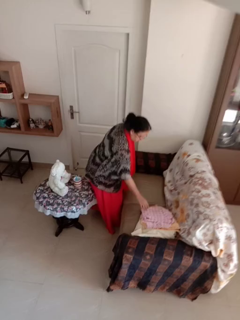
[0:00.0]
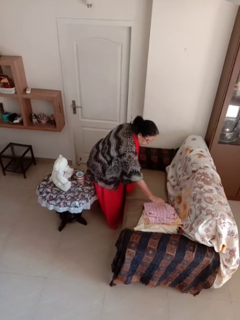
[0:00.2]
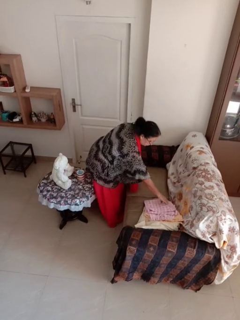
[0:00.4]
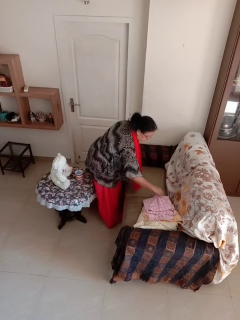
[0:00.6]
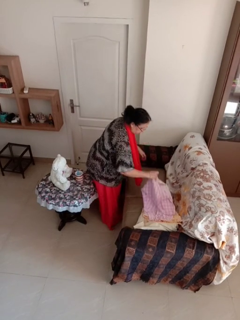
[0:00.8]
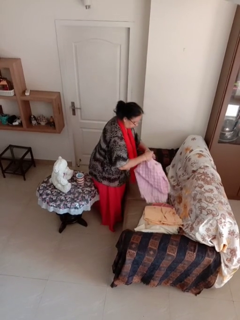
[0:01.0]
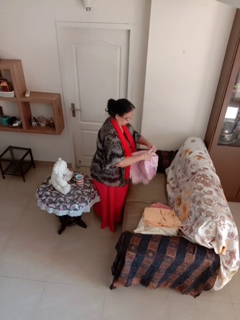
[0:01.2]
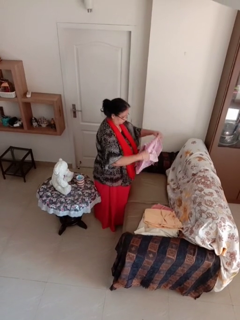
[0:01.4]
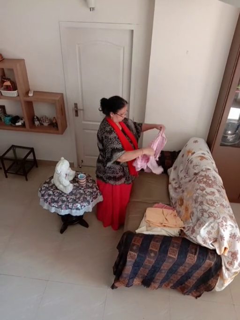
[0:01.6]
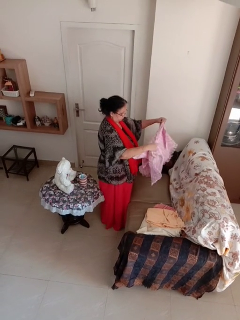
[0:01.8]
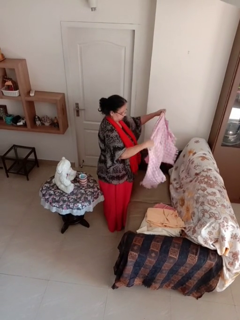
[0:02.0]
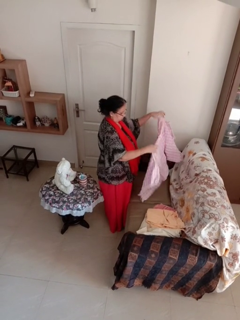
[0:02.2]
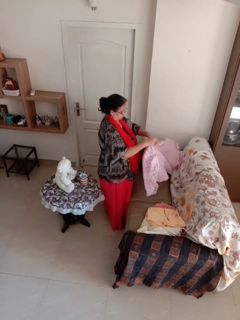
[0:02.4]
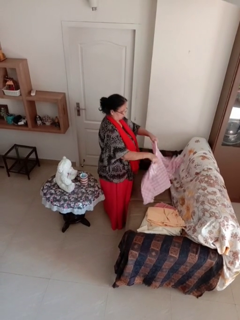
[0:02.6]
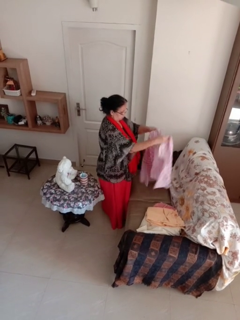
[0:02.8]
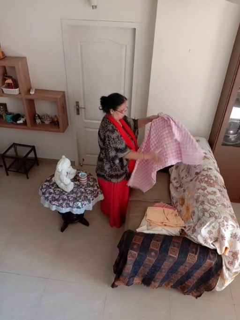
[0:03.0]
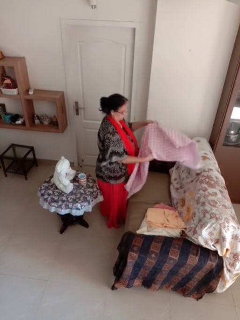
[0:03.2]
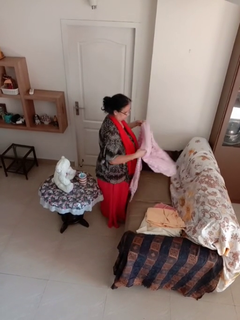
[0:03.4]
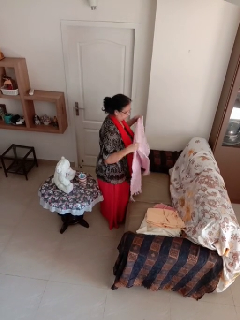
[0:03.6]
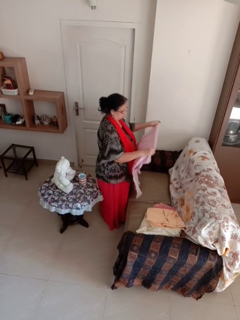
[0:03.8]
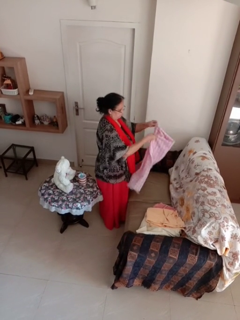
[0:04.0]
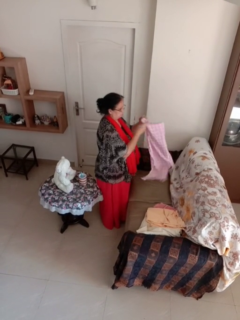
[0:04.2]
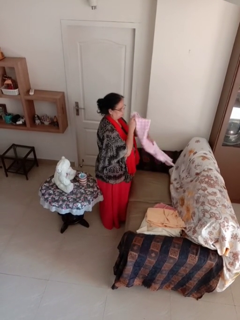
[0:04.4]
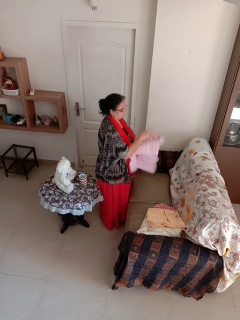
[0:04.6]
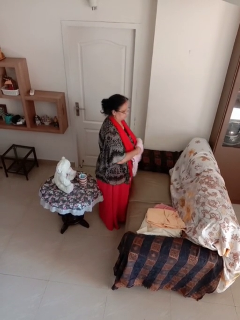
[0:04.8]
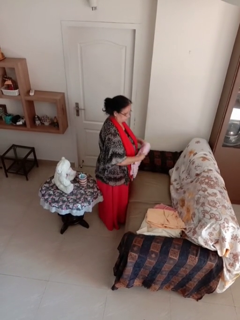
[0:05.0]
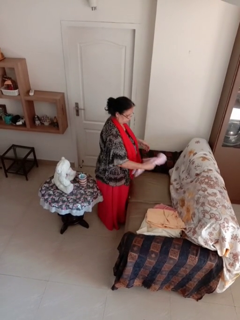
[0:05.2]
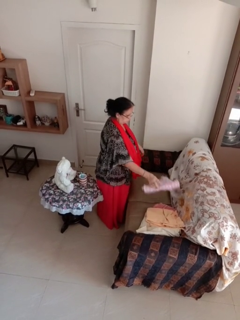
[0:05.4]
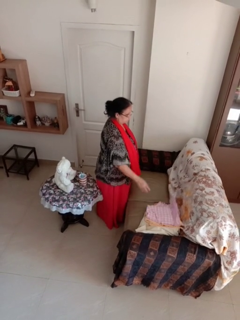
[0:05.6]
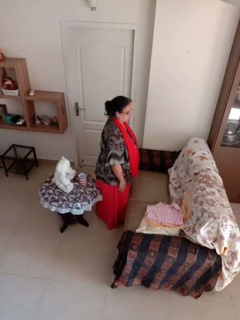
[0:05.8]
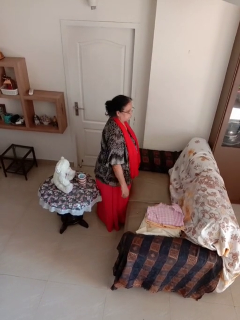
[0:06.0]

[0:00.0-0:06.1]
person folds towel

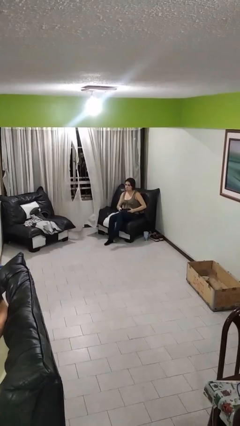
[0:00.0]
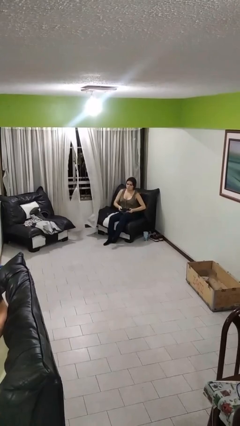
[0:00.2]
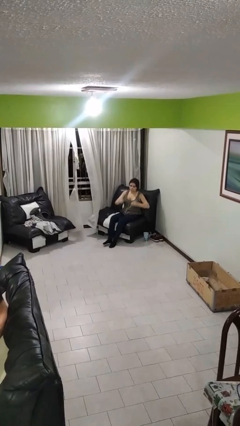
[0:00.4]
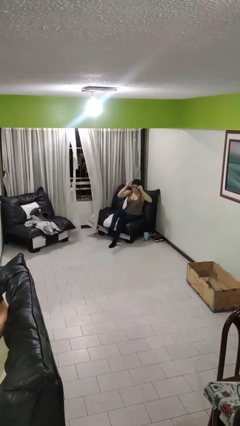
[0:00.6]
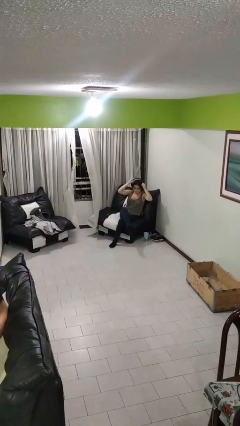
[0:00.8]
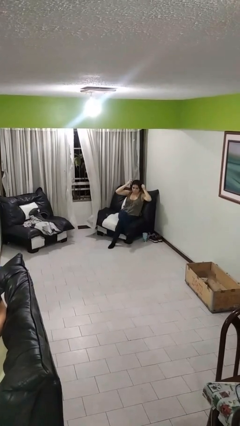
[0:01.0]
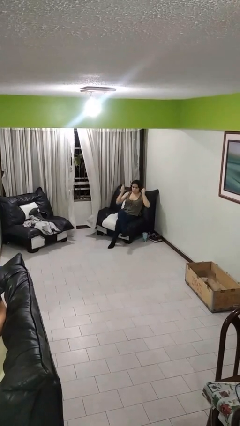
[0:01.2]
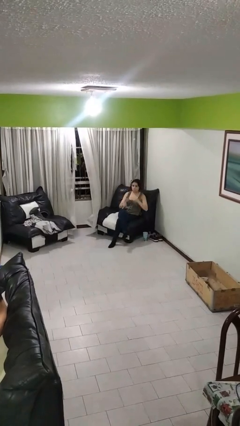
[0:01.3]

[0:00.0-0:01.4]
person puts on headphones

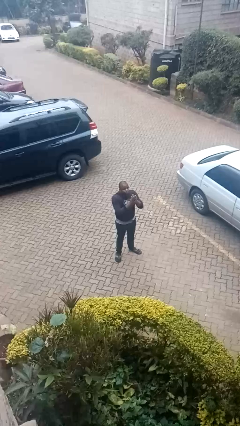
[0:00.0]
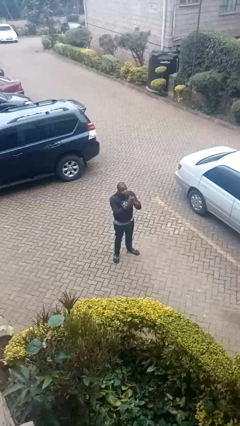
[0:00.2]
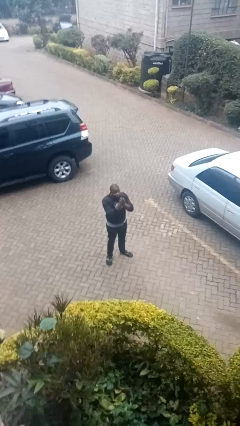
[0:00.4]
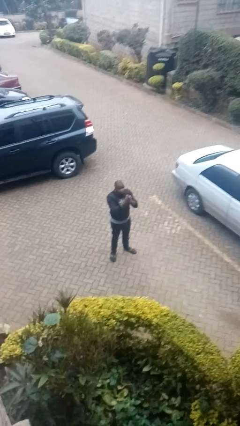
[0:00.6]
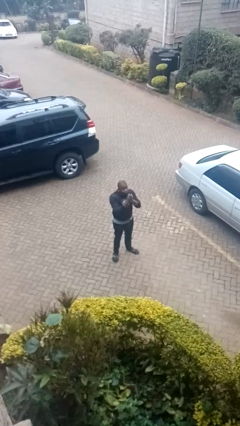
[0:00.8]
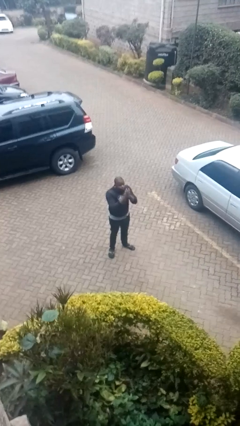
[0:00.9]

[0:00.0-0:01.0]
person blows into hands

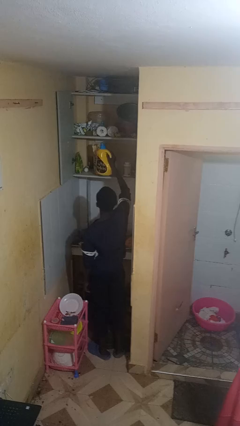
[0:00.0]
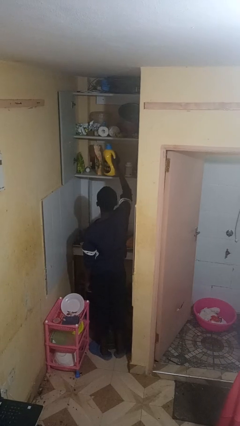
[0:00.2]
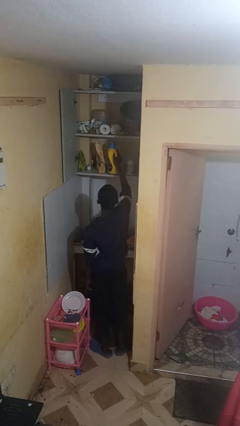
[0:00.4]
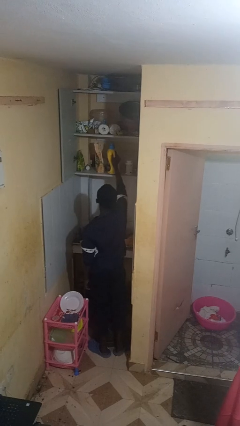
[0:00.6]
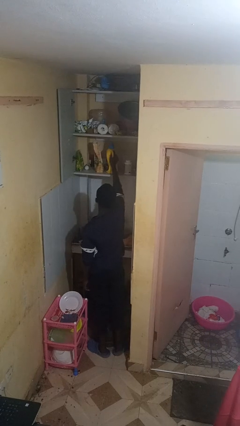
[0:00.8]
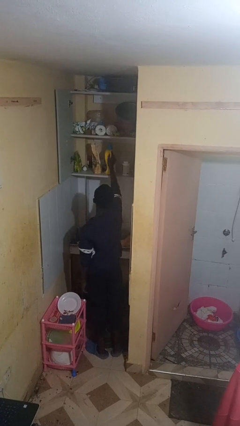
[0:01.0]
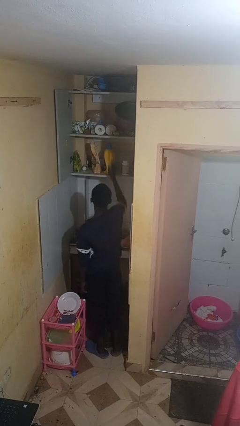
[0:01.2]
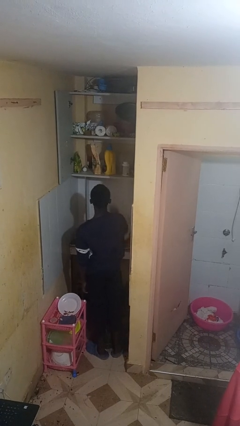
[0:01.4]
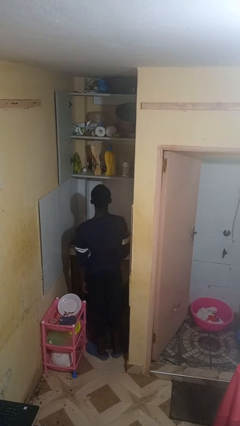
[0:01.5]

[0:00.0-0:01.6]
person puts object in cabinet

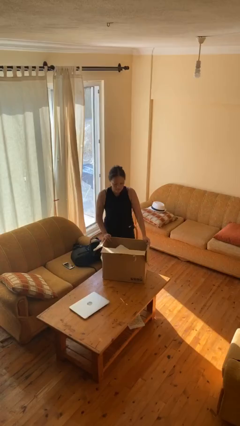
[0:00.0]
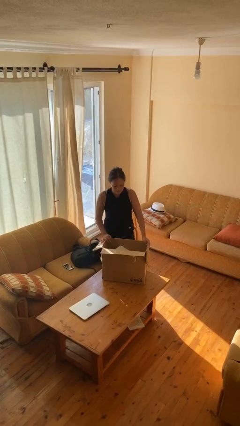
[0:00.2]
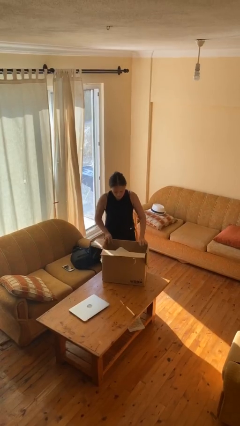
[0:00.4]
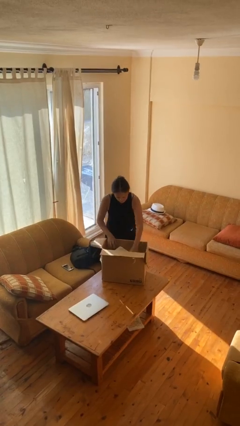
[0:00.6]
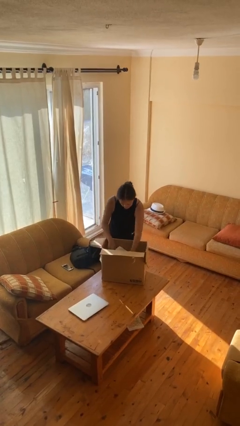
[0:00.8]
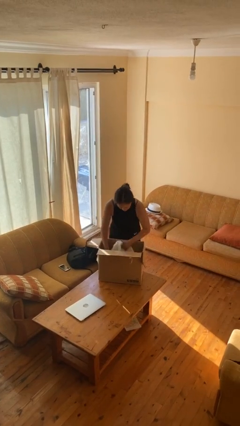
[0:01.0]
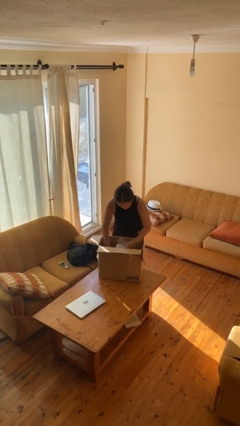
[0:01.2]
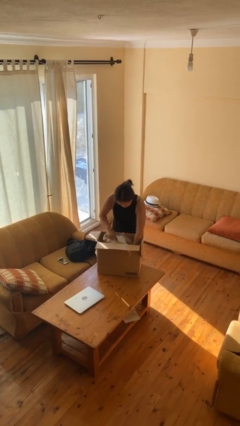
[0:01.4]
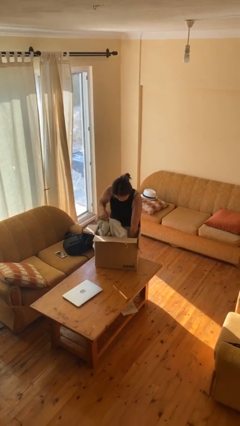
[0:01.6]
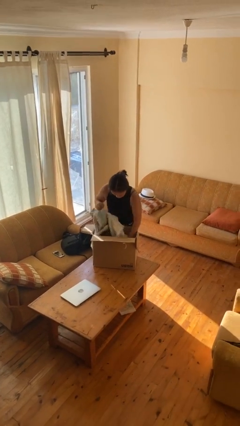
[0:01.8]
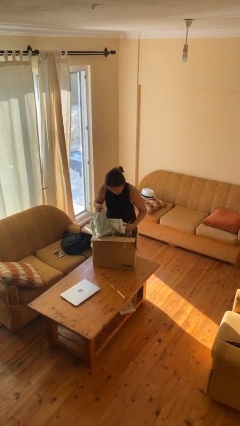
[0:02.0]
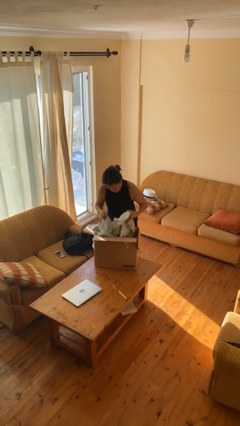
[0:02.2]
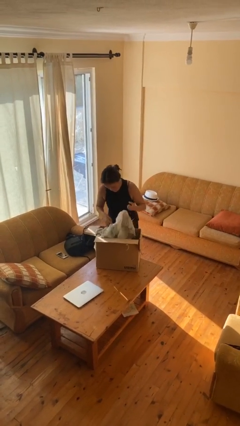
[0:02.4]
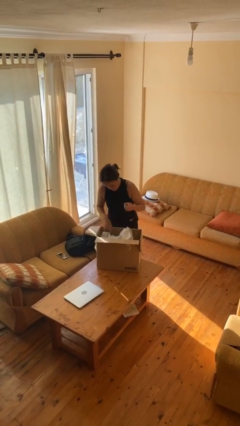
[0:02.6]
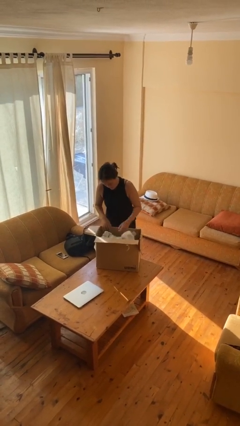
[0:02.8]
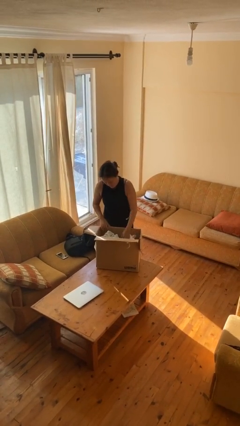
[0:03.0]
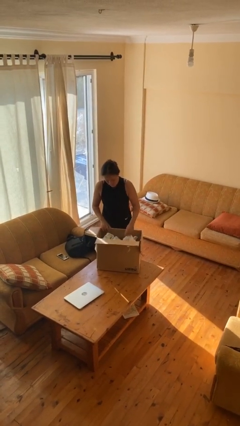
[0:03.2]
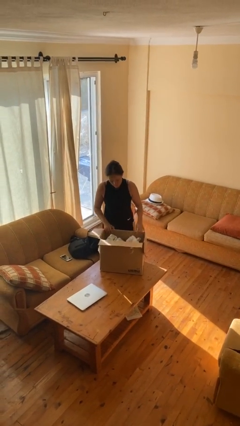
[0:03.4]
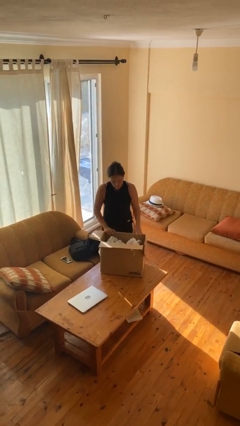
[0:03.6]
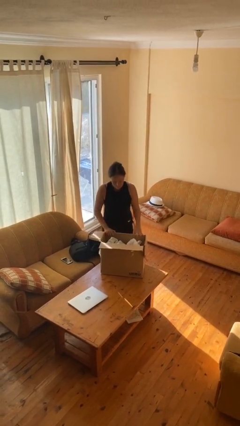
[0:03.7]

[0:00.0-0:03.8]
person searches in box

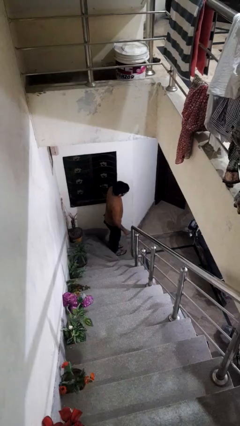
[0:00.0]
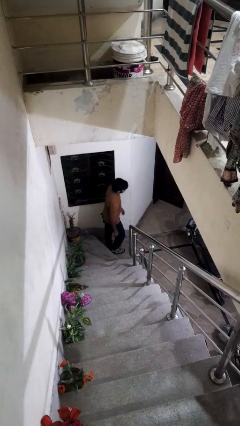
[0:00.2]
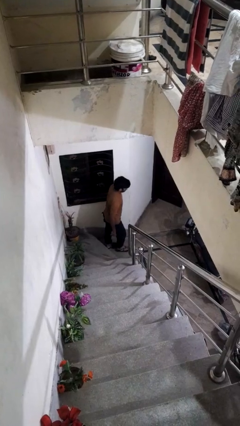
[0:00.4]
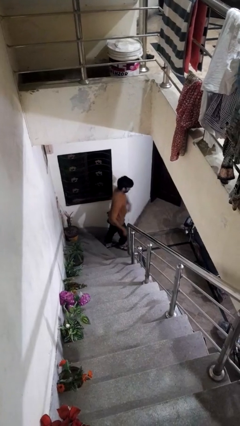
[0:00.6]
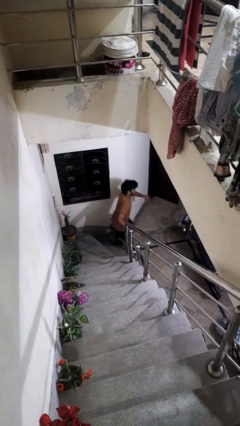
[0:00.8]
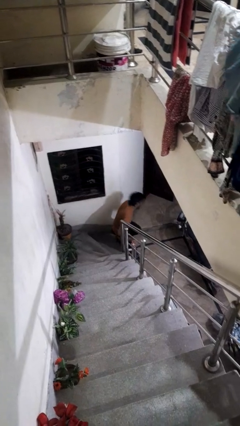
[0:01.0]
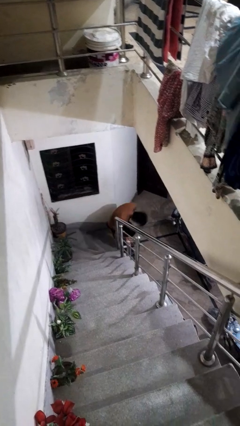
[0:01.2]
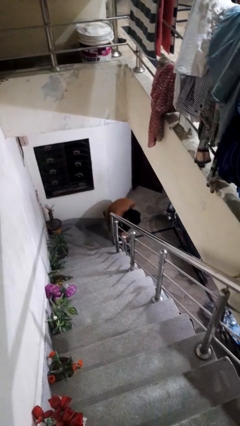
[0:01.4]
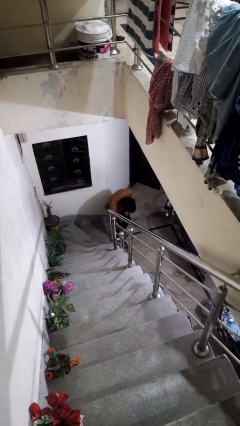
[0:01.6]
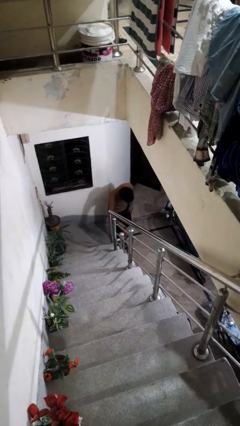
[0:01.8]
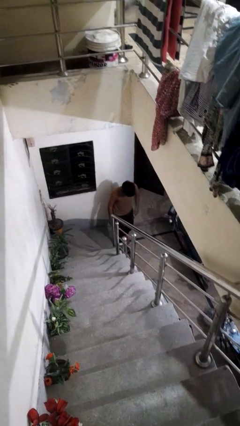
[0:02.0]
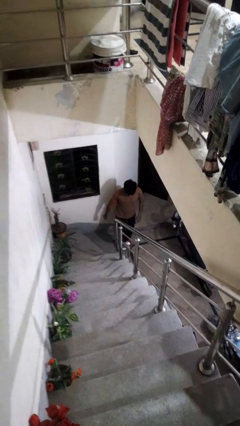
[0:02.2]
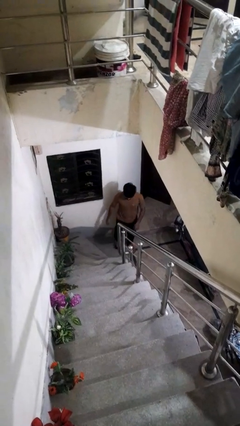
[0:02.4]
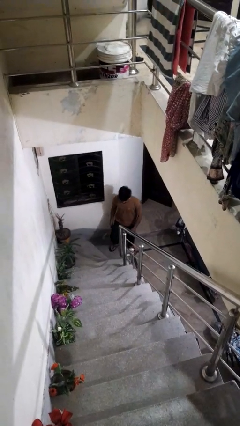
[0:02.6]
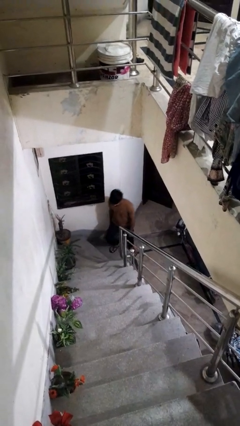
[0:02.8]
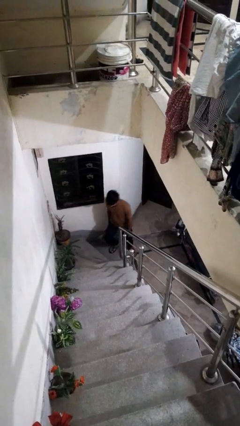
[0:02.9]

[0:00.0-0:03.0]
person trips on stair

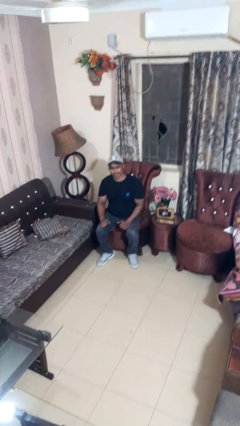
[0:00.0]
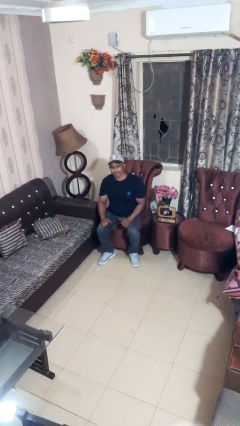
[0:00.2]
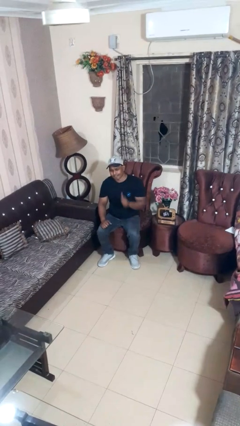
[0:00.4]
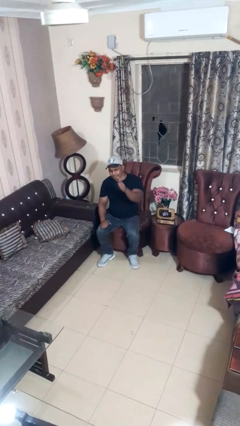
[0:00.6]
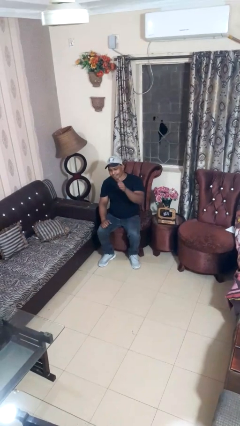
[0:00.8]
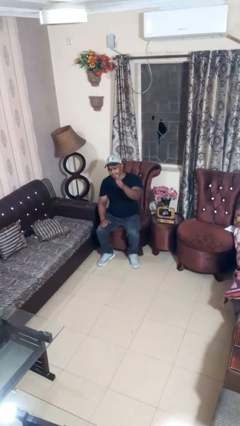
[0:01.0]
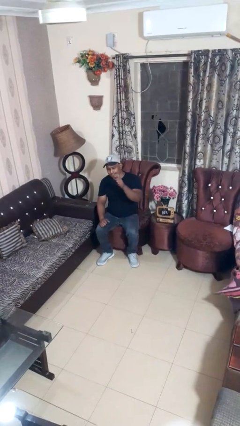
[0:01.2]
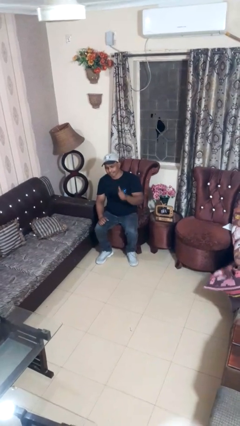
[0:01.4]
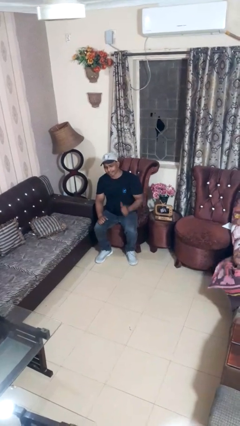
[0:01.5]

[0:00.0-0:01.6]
person gestures thumbs up

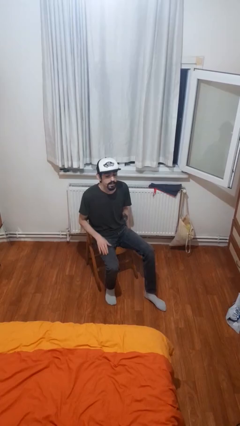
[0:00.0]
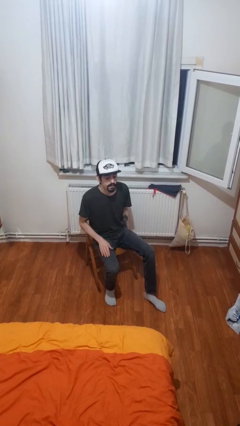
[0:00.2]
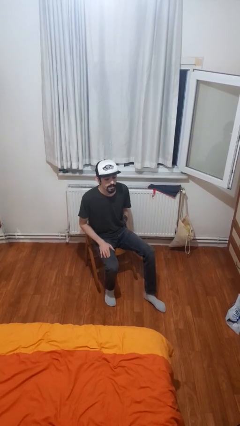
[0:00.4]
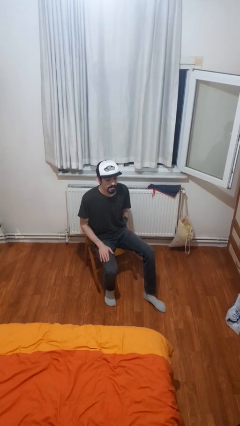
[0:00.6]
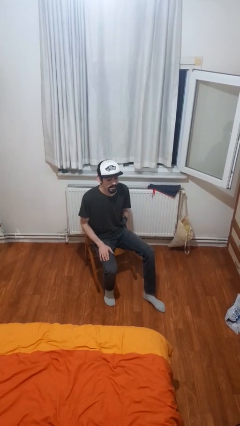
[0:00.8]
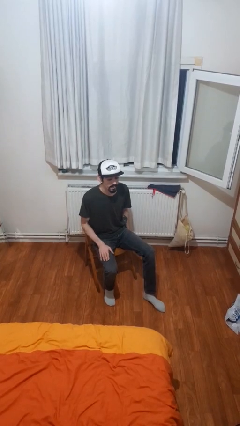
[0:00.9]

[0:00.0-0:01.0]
person slaps hands on thighs
